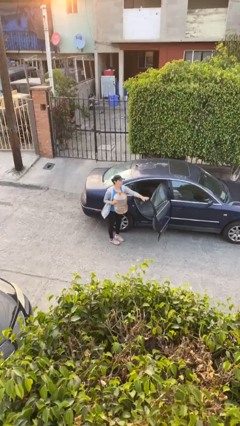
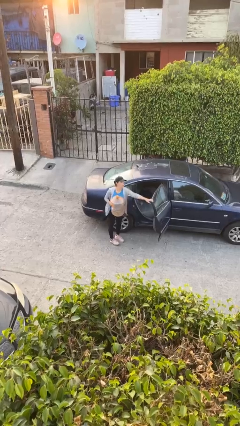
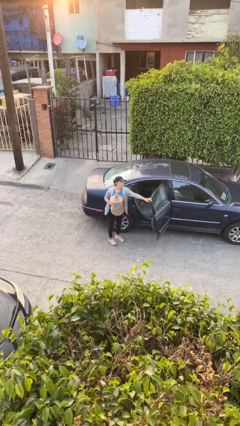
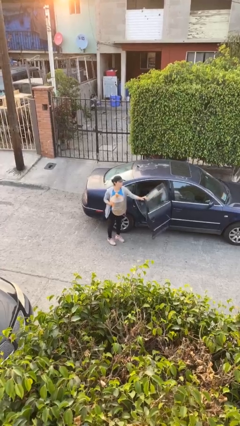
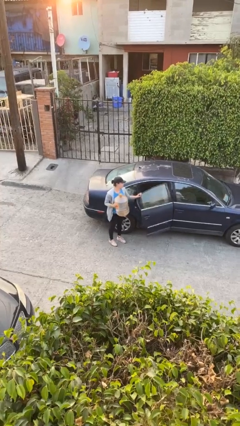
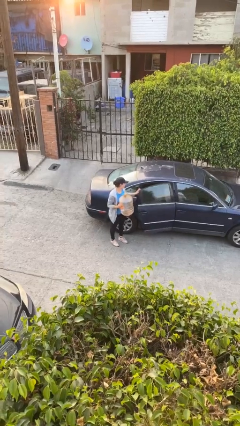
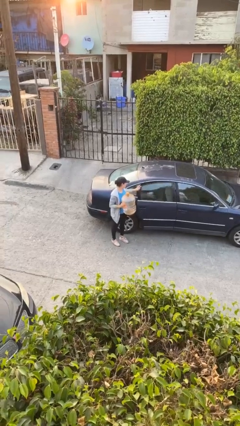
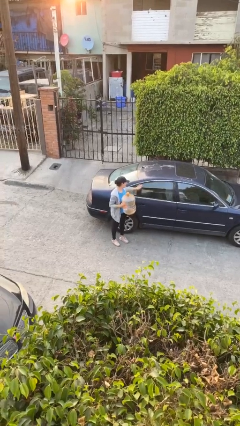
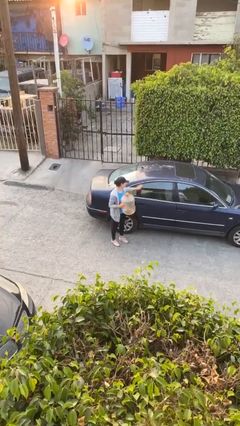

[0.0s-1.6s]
person closes car door

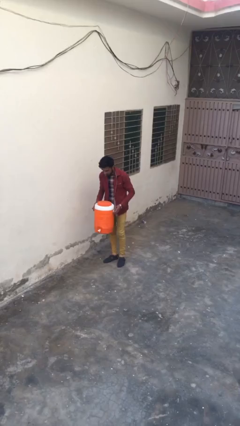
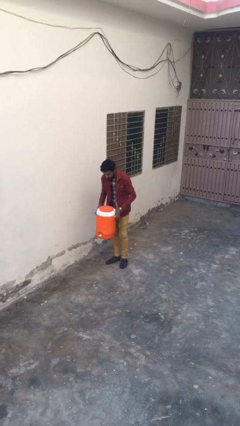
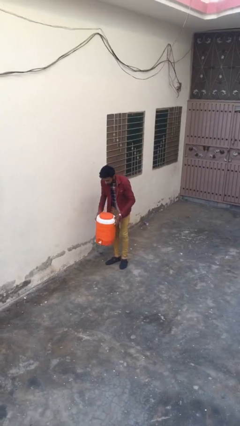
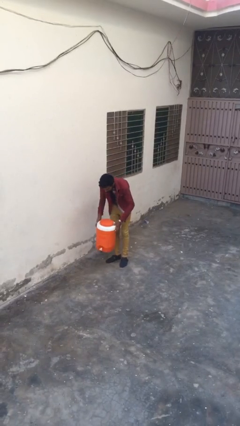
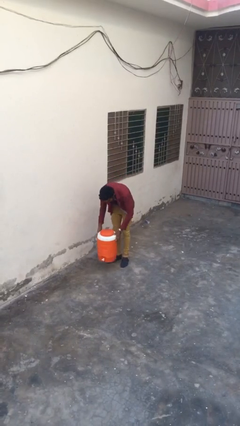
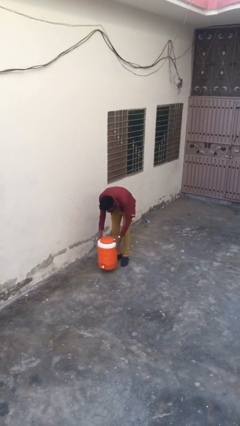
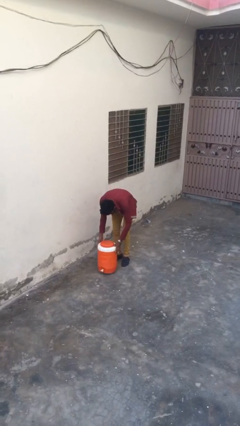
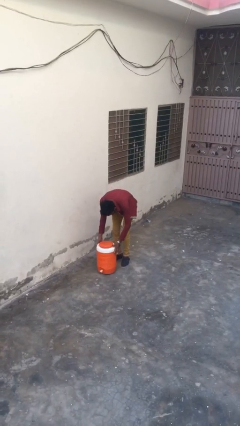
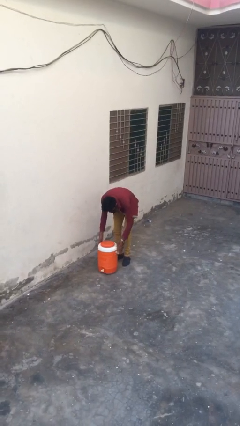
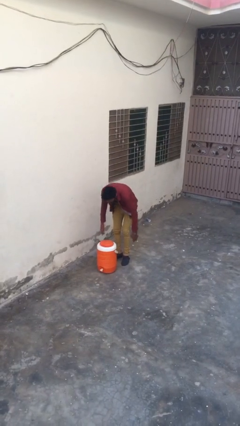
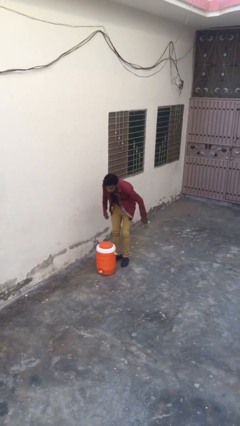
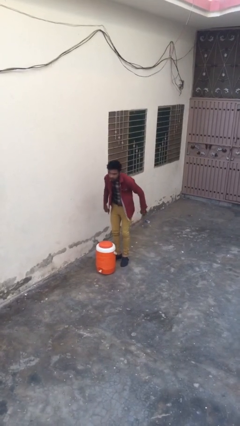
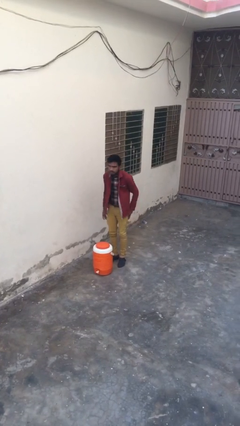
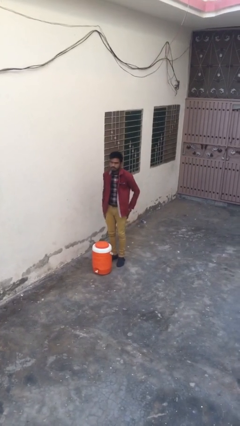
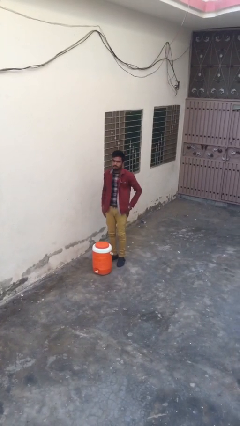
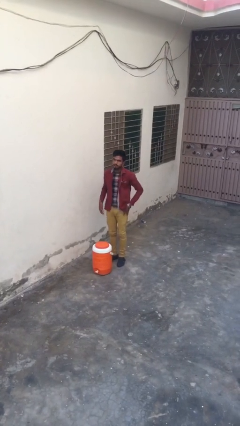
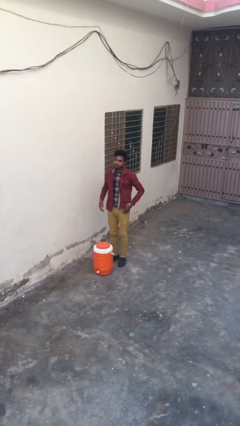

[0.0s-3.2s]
person puts down object on floor

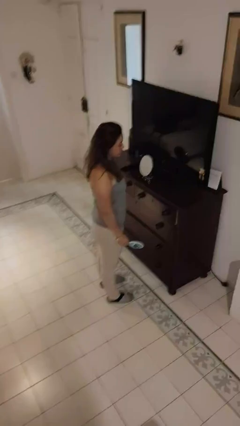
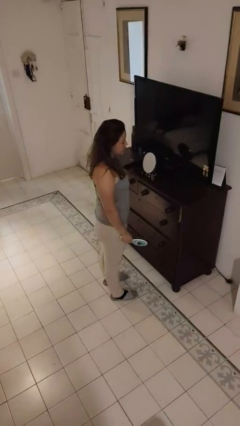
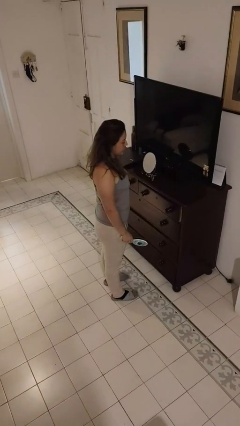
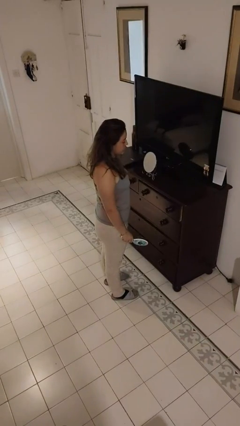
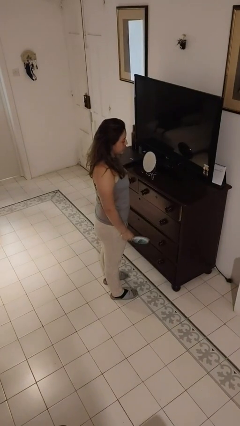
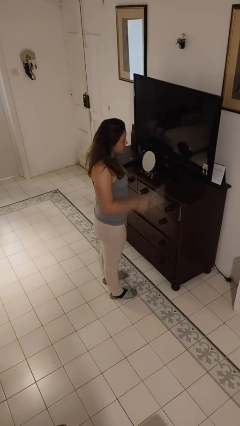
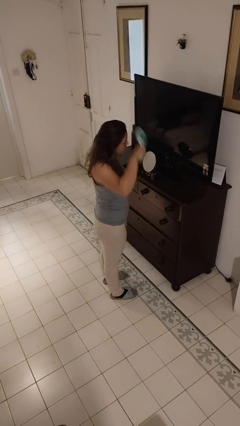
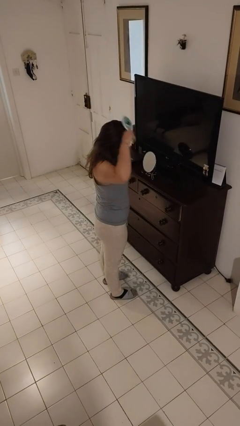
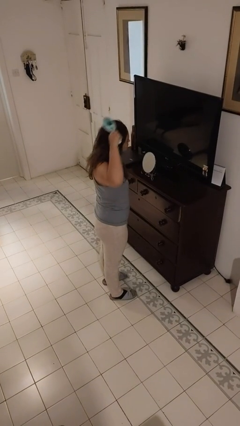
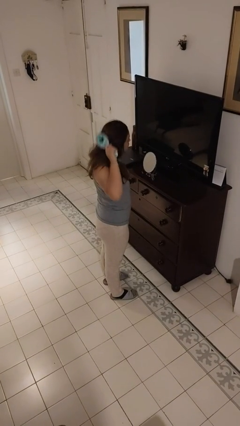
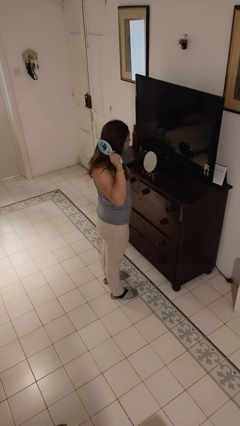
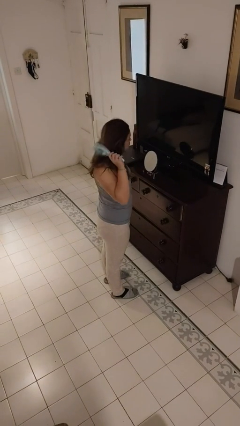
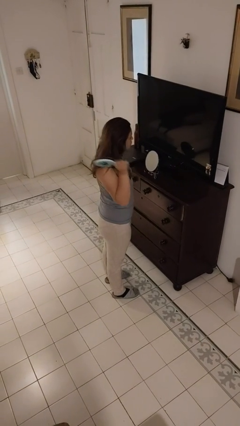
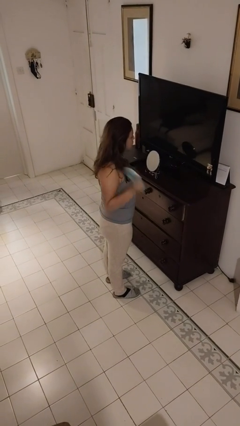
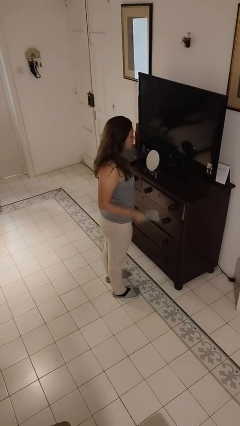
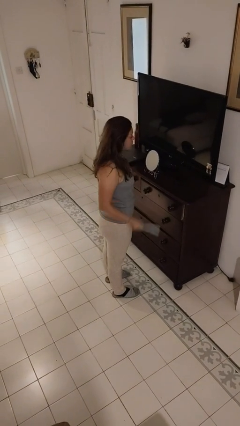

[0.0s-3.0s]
person brushes hair

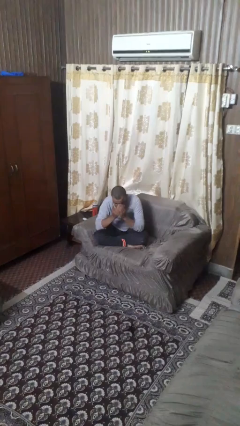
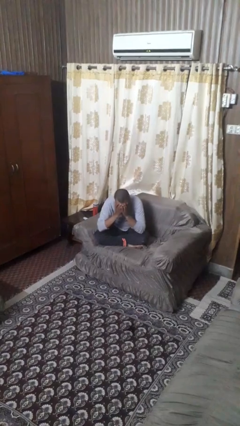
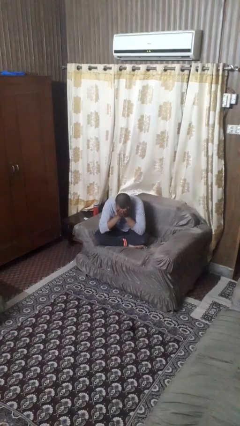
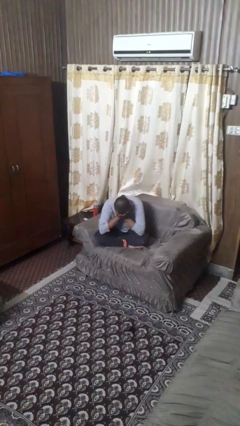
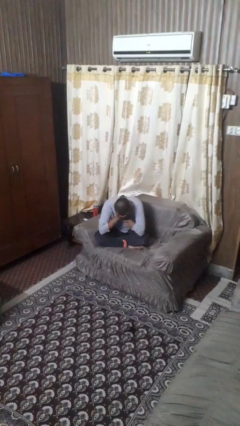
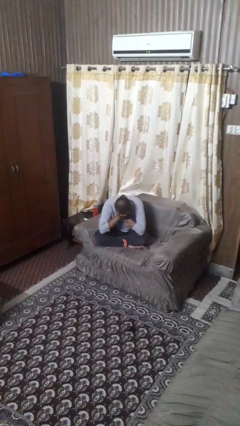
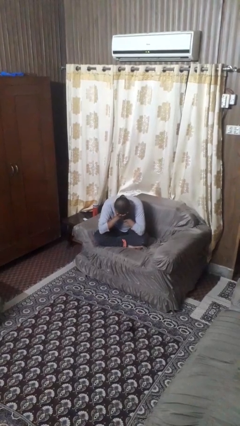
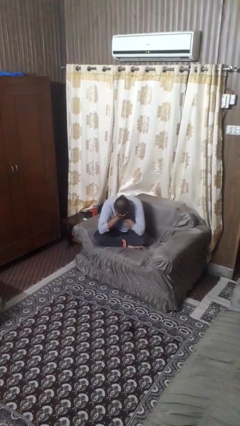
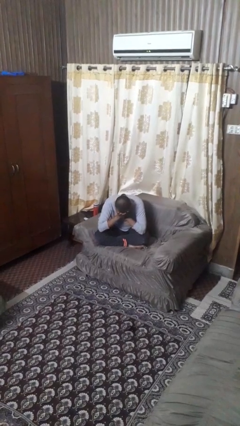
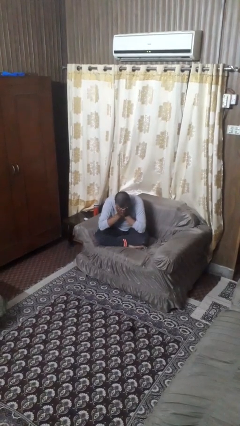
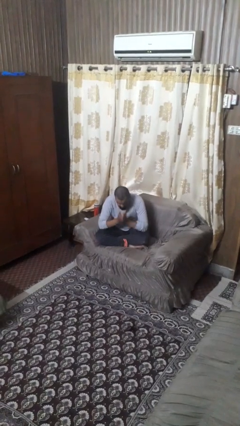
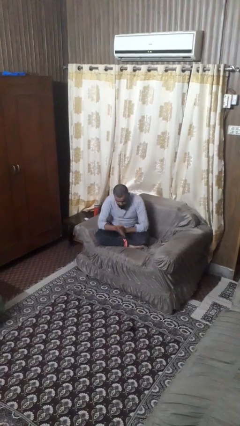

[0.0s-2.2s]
person covers face with hands

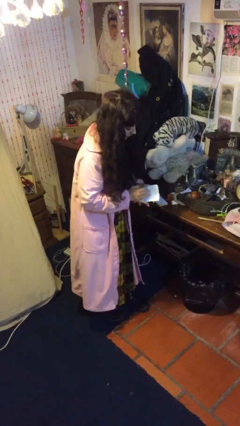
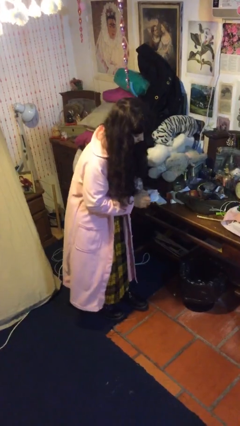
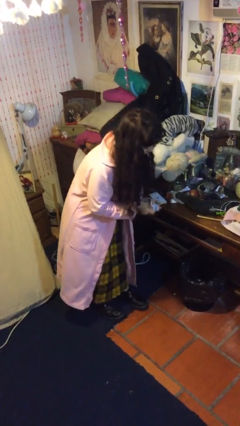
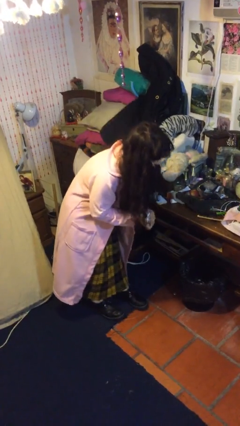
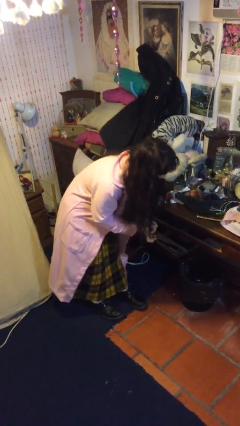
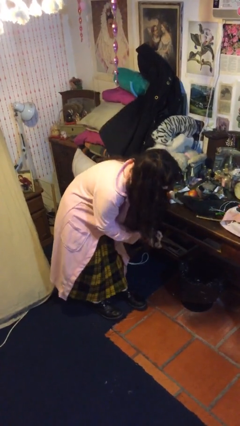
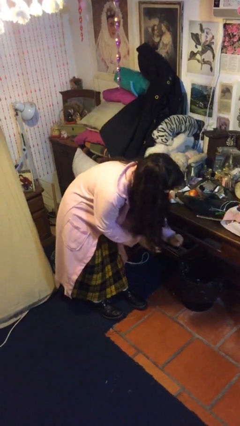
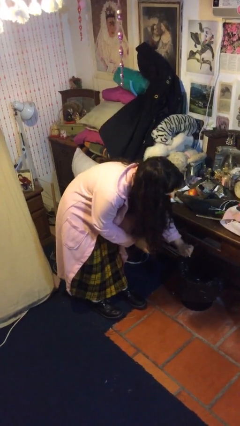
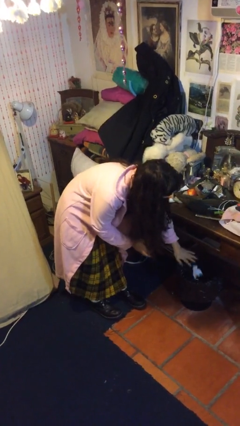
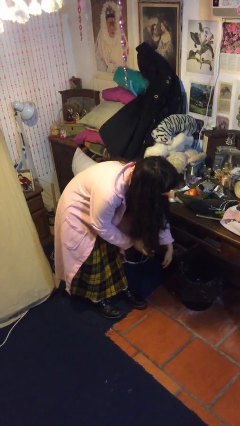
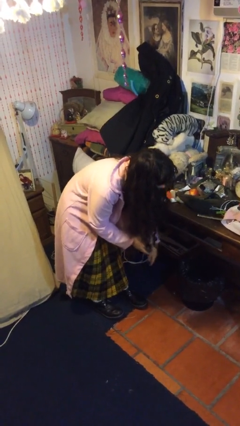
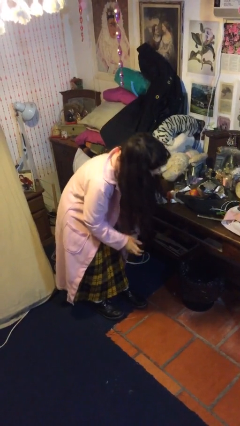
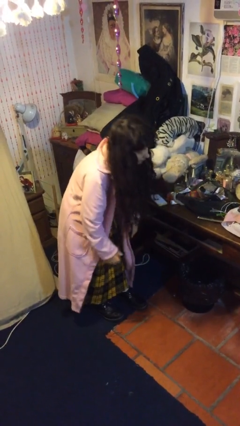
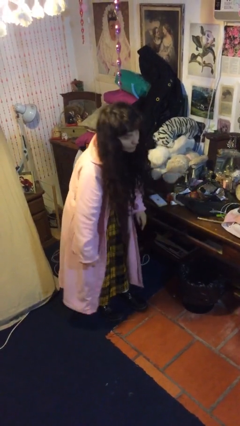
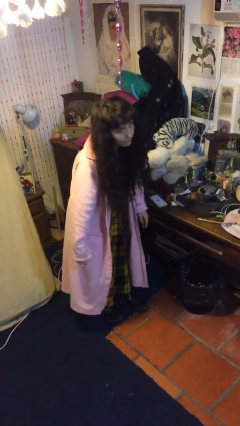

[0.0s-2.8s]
person discards trash

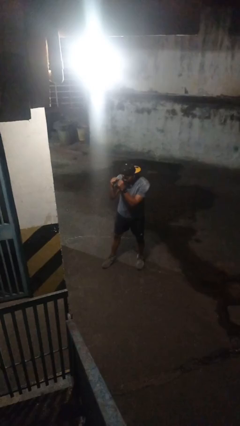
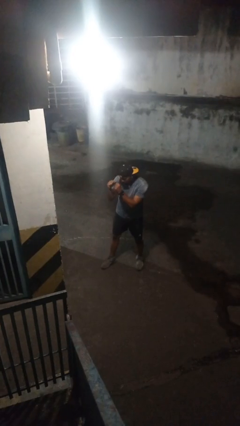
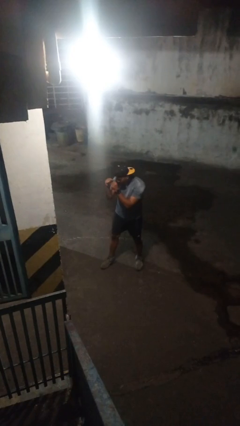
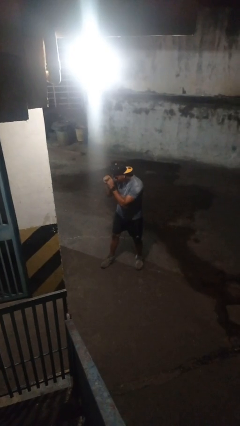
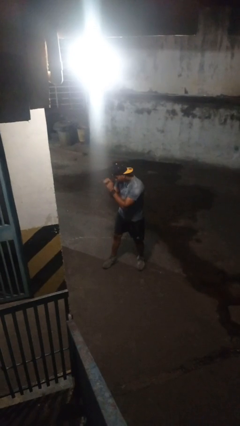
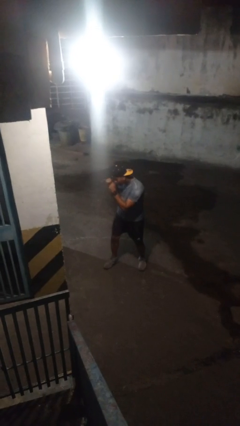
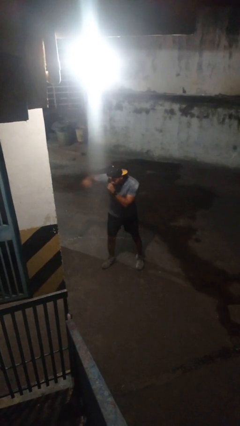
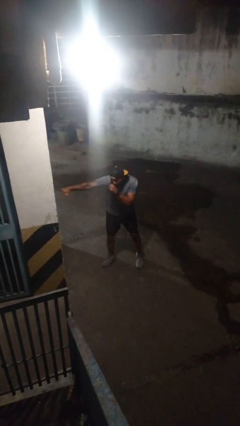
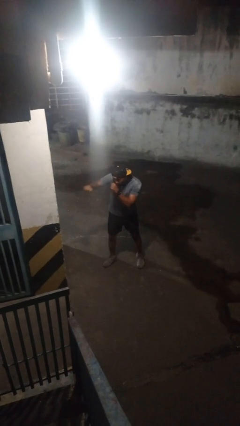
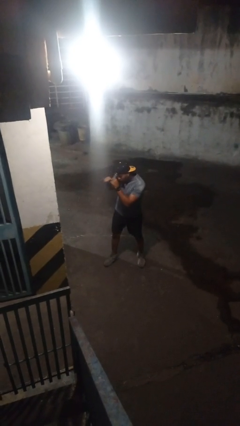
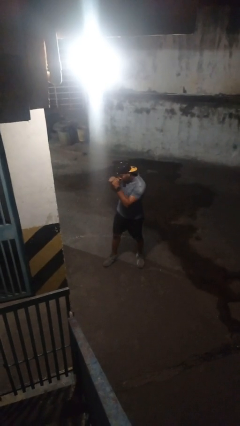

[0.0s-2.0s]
person punches

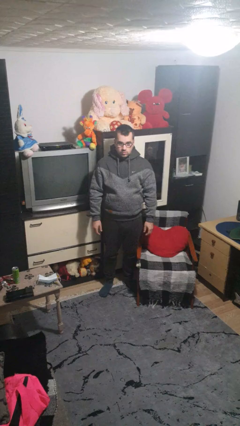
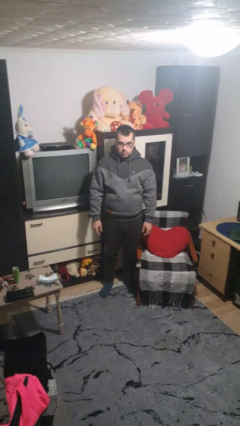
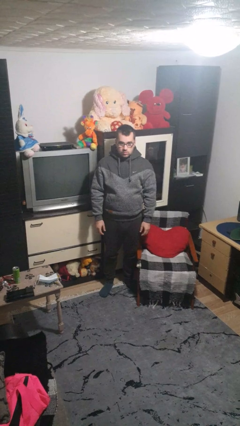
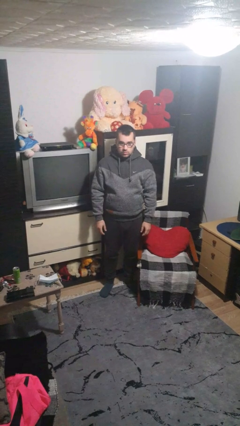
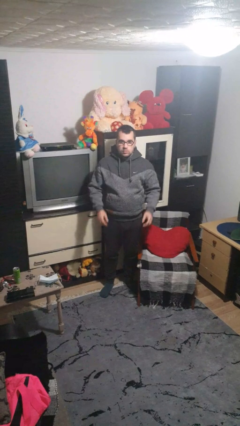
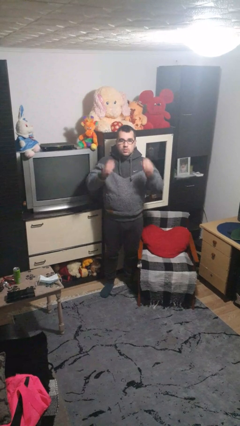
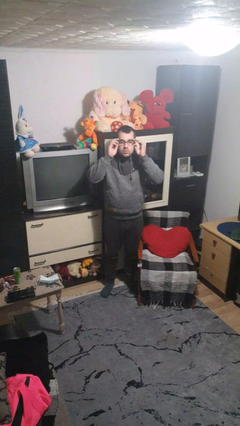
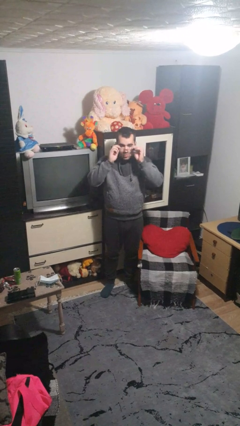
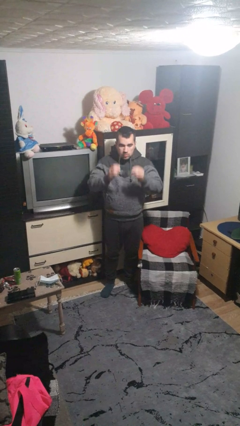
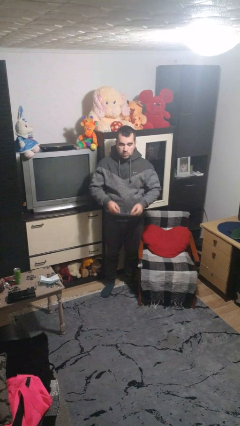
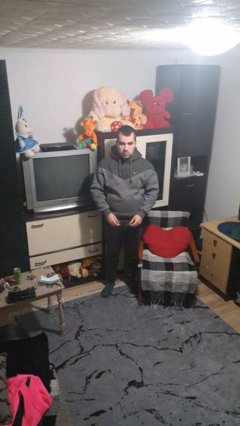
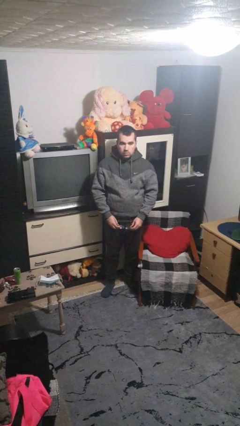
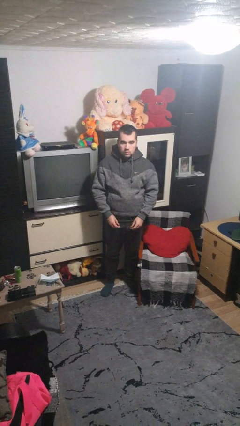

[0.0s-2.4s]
person takes off glasses

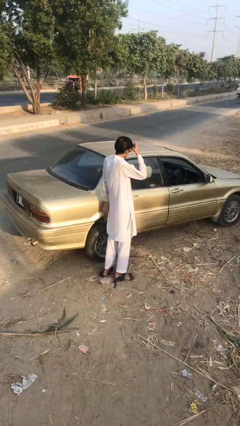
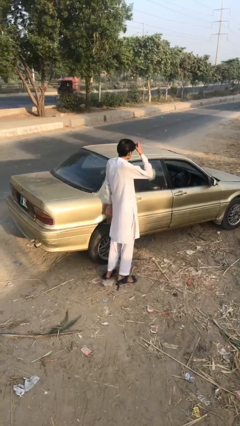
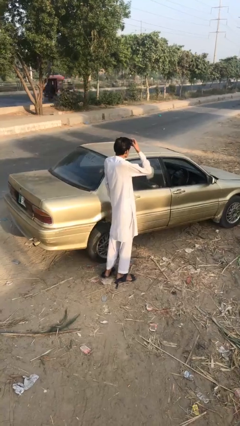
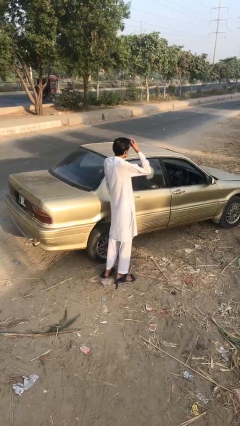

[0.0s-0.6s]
person opens car door
